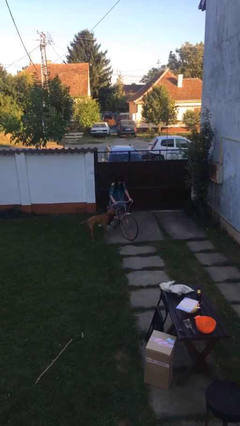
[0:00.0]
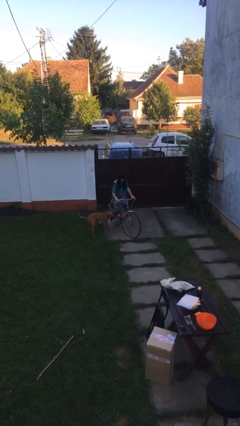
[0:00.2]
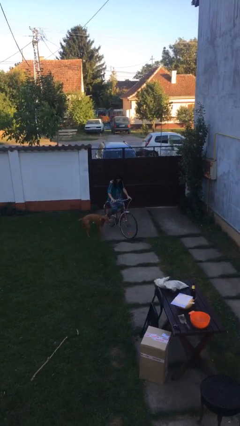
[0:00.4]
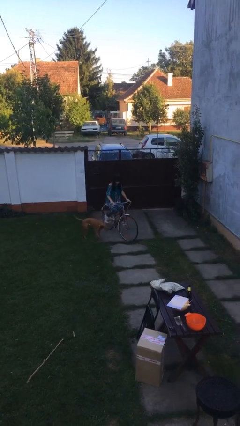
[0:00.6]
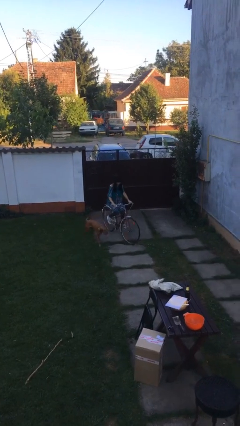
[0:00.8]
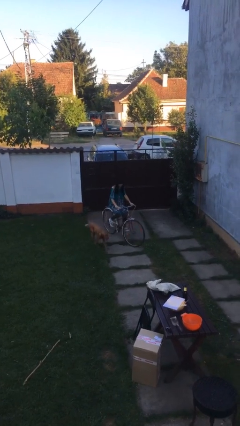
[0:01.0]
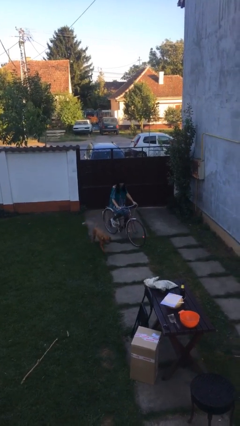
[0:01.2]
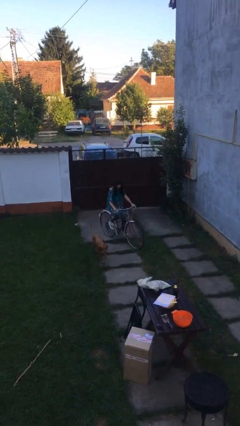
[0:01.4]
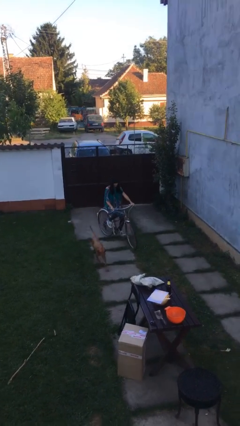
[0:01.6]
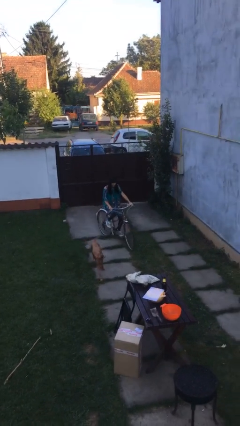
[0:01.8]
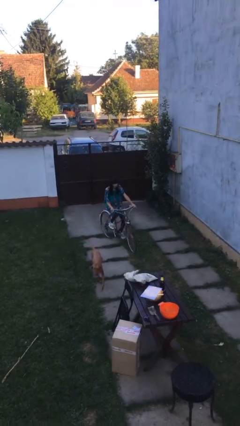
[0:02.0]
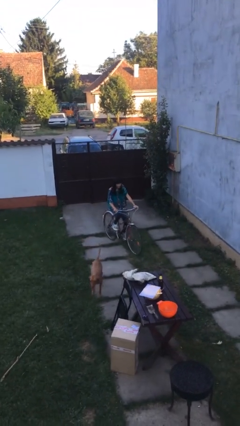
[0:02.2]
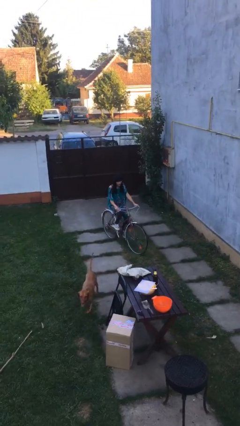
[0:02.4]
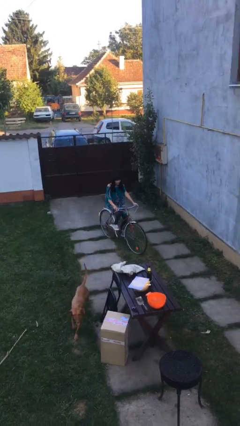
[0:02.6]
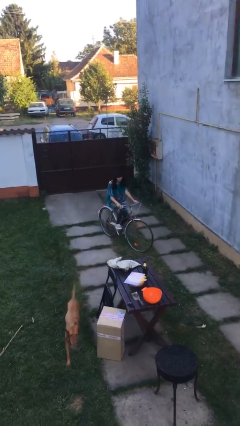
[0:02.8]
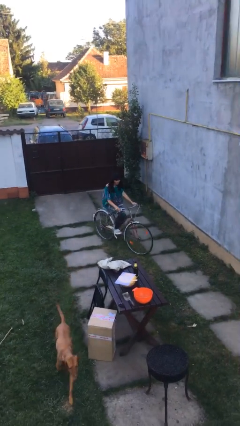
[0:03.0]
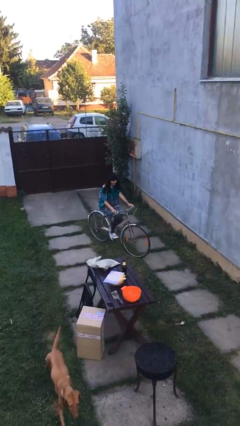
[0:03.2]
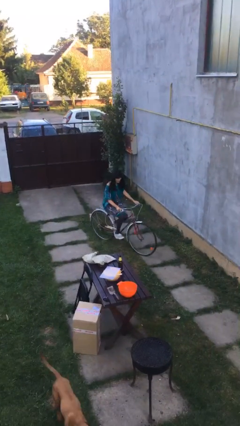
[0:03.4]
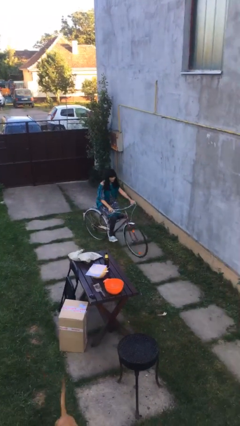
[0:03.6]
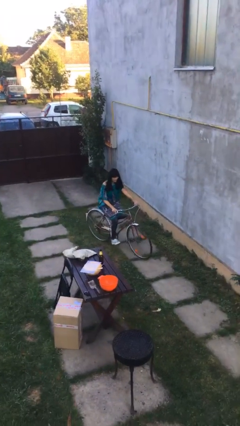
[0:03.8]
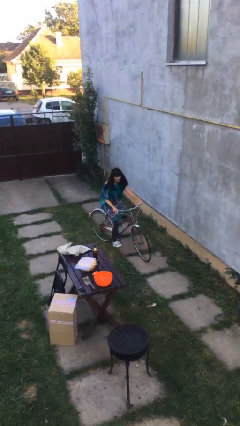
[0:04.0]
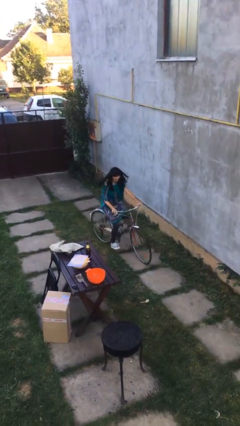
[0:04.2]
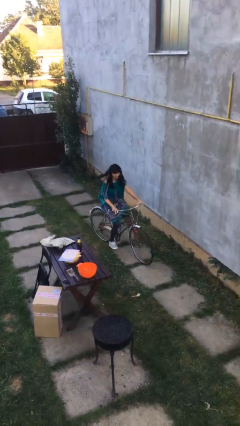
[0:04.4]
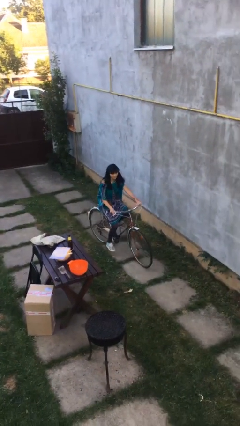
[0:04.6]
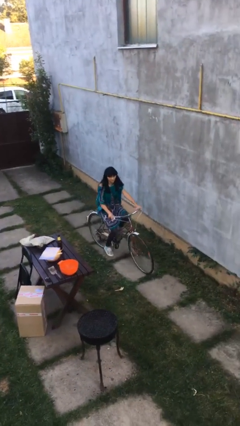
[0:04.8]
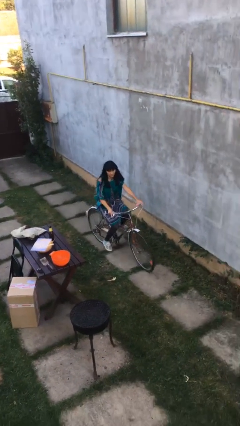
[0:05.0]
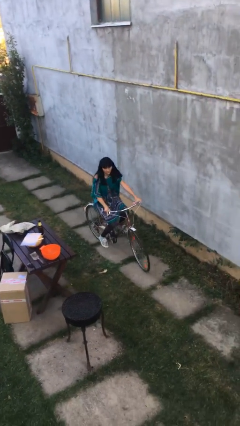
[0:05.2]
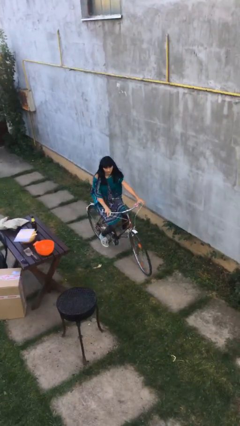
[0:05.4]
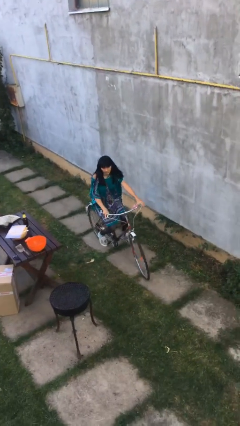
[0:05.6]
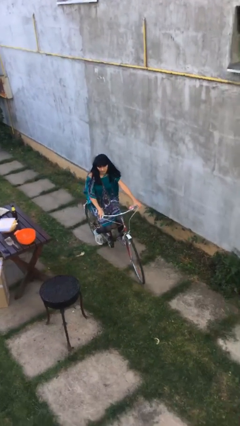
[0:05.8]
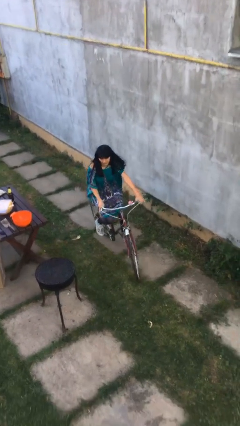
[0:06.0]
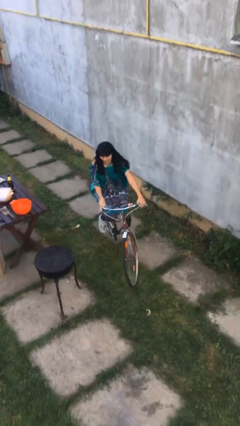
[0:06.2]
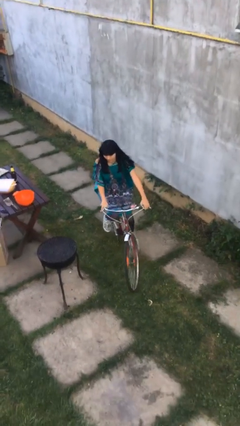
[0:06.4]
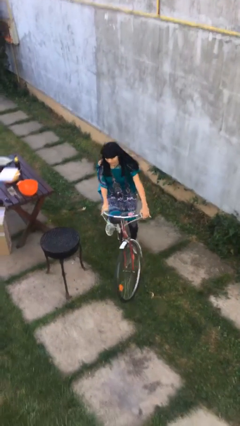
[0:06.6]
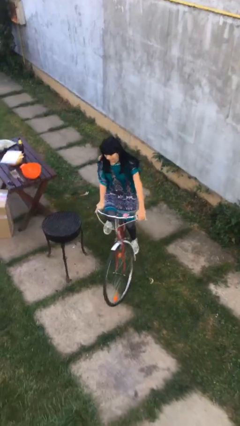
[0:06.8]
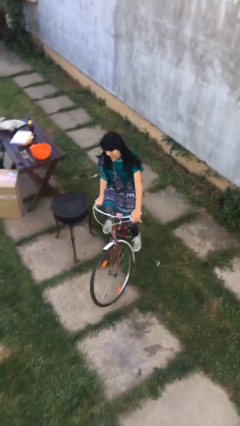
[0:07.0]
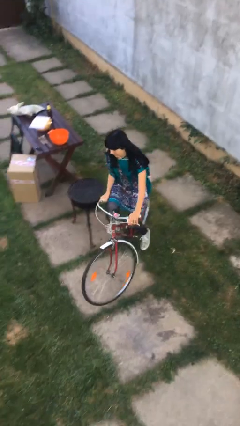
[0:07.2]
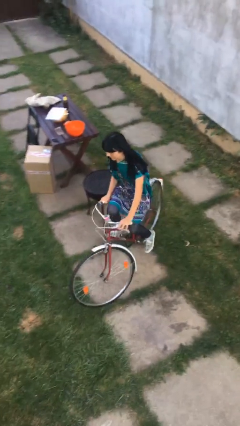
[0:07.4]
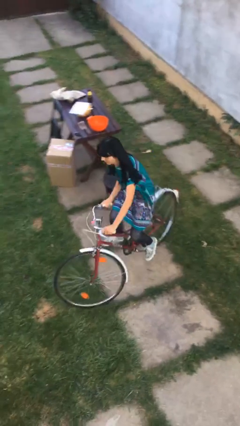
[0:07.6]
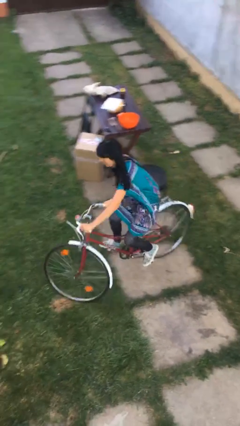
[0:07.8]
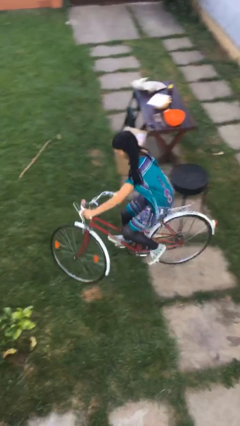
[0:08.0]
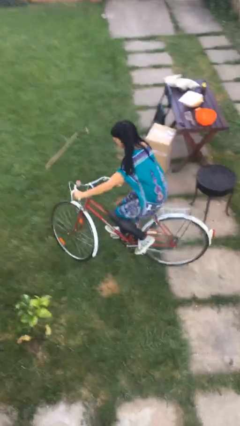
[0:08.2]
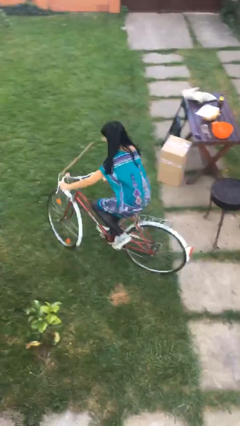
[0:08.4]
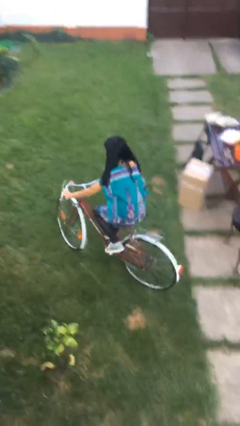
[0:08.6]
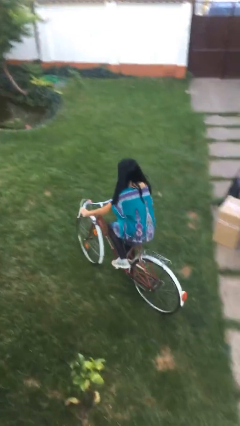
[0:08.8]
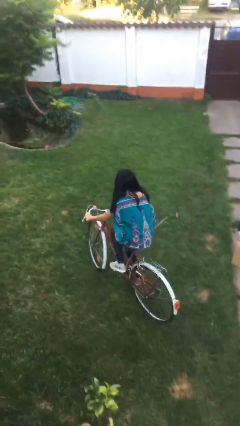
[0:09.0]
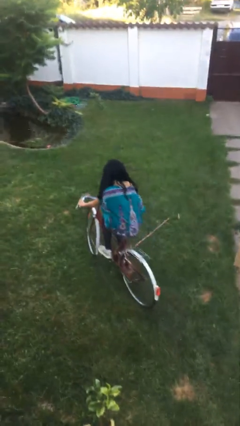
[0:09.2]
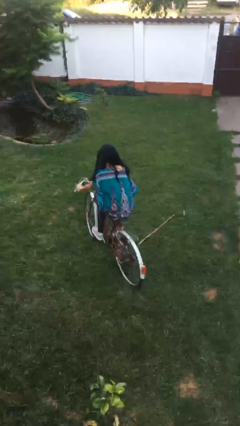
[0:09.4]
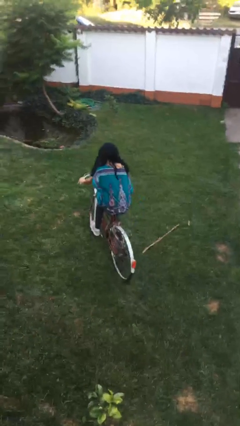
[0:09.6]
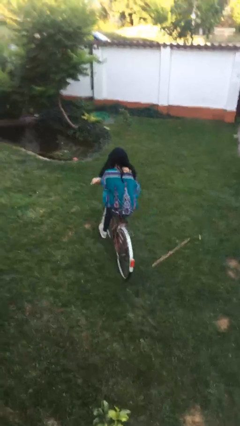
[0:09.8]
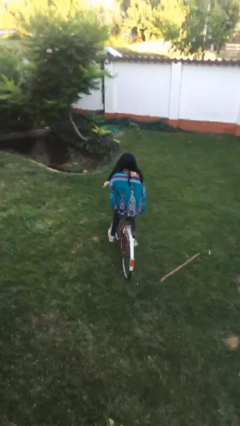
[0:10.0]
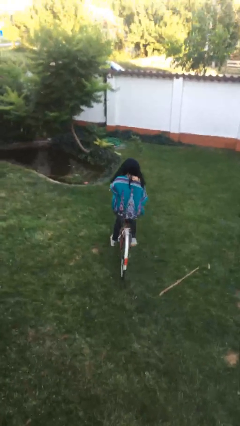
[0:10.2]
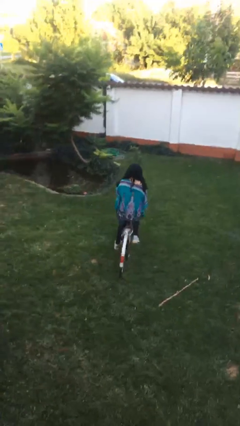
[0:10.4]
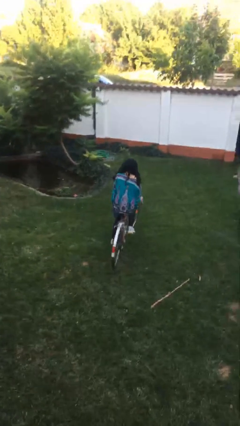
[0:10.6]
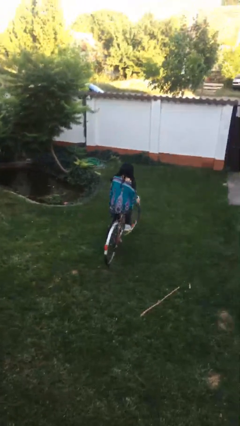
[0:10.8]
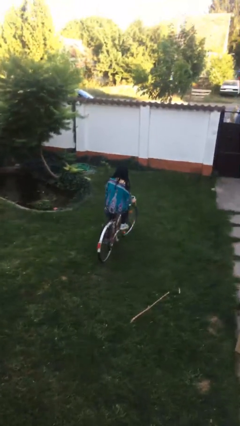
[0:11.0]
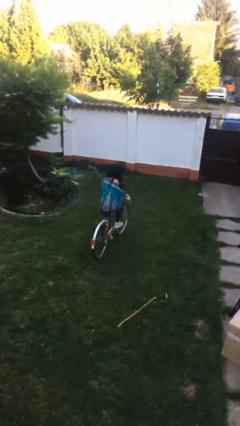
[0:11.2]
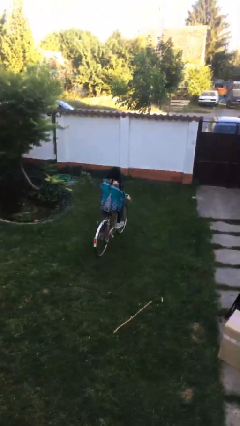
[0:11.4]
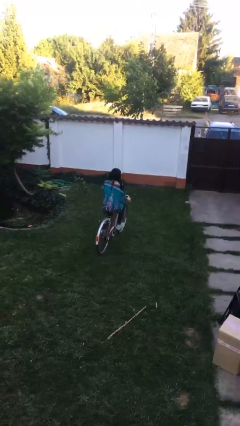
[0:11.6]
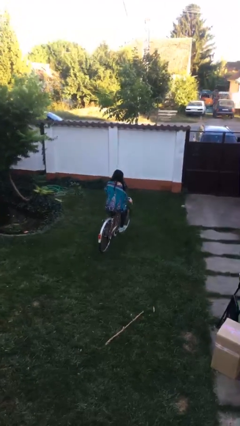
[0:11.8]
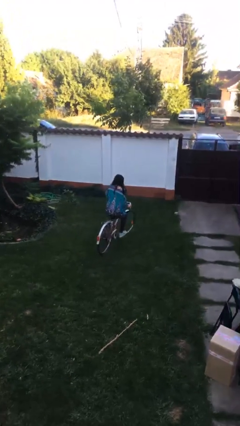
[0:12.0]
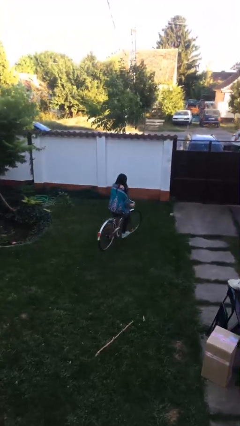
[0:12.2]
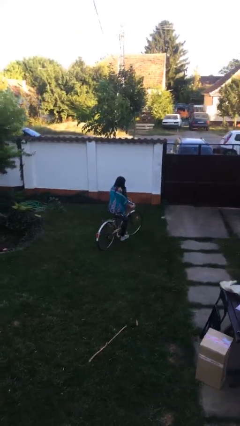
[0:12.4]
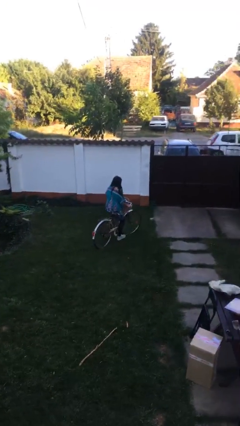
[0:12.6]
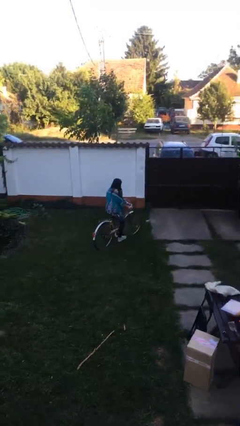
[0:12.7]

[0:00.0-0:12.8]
person rides bicycle

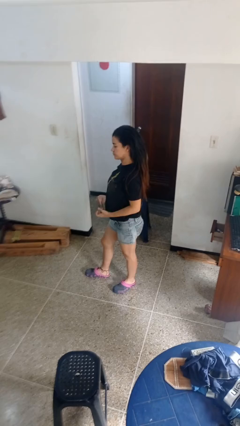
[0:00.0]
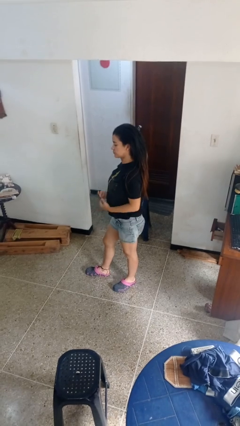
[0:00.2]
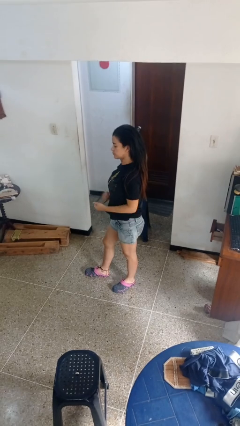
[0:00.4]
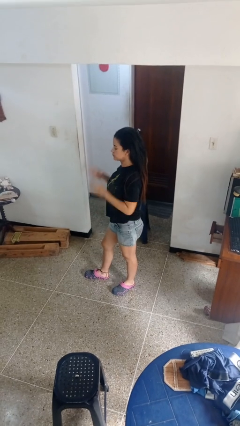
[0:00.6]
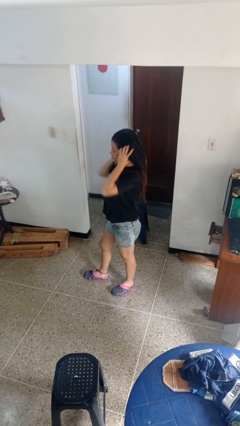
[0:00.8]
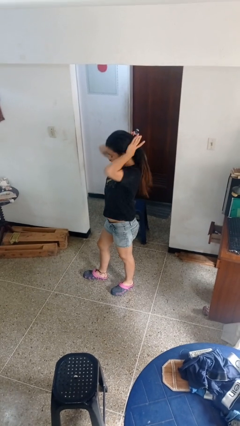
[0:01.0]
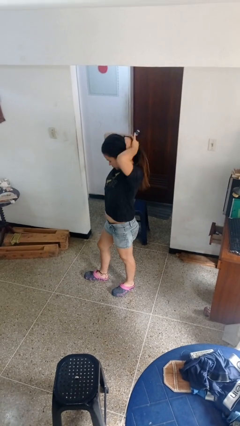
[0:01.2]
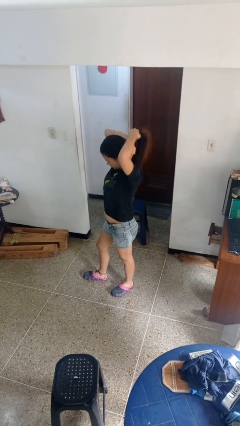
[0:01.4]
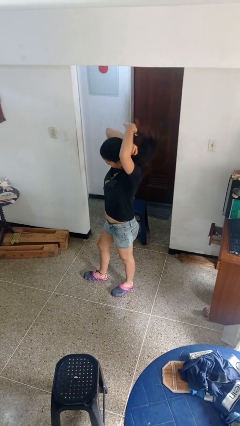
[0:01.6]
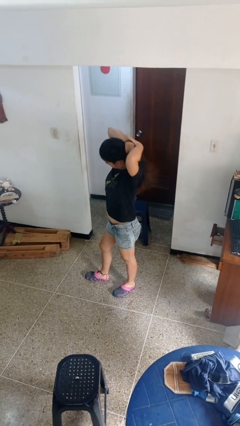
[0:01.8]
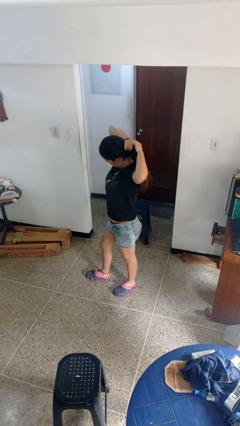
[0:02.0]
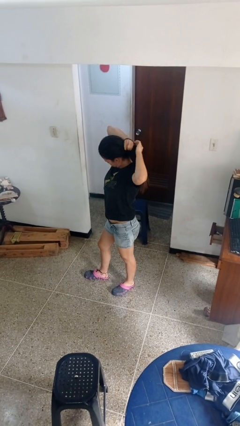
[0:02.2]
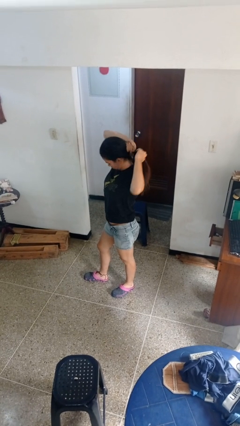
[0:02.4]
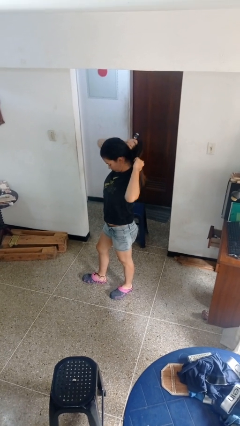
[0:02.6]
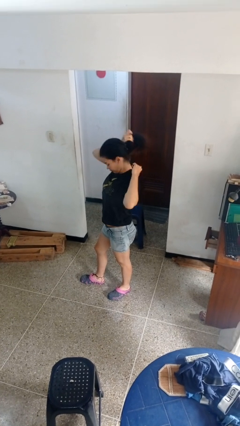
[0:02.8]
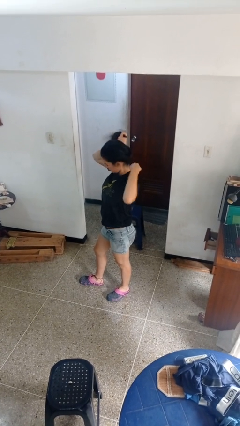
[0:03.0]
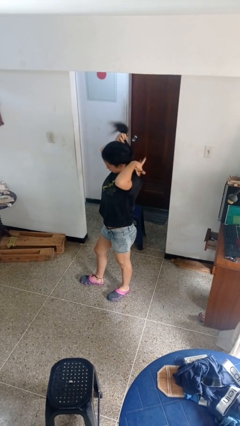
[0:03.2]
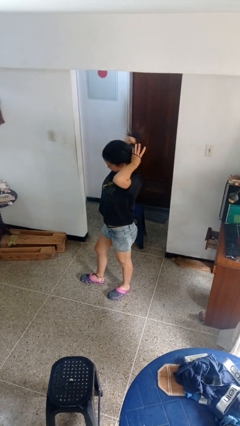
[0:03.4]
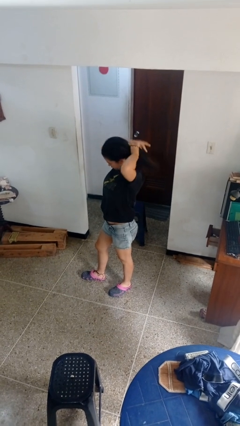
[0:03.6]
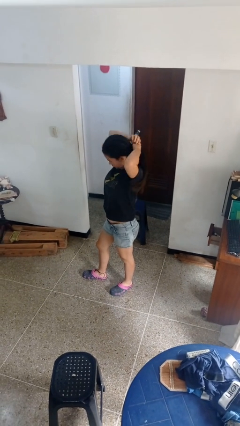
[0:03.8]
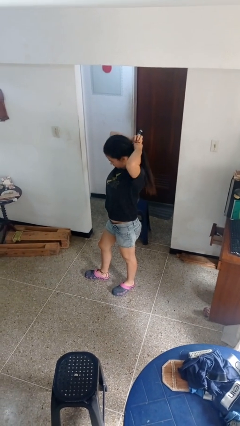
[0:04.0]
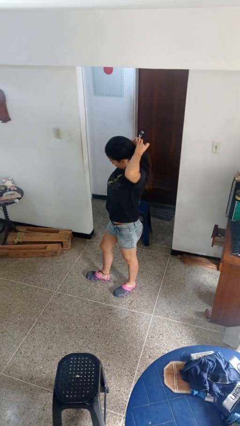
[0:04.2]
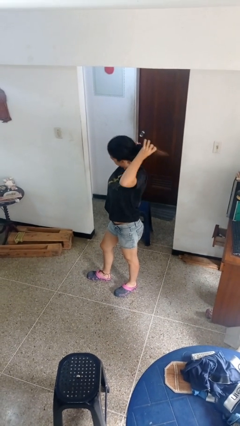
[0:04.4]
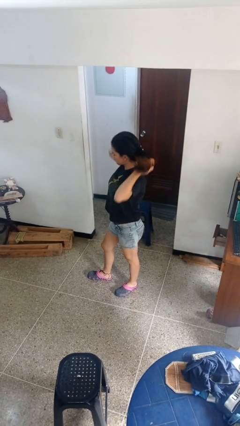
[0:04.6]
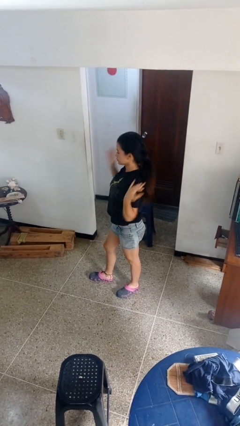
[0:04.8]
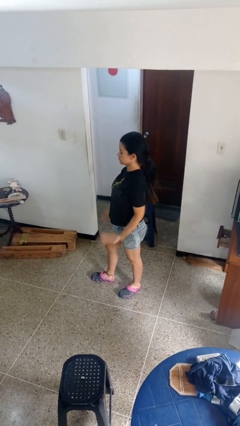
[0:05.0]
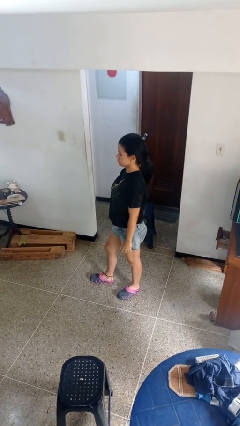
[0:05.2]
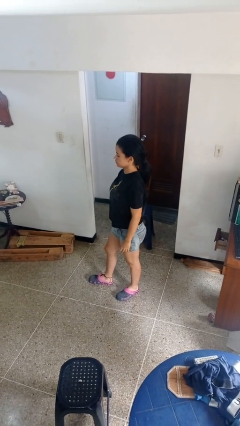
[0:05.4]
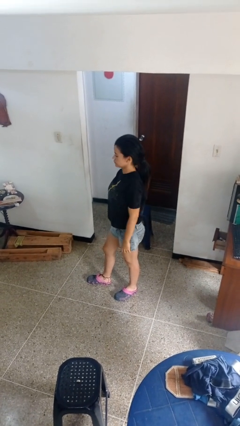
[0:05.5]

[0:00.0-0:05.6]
person puts hair in ponytail
